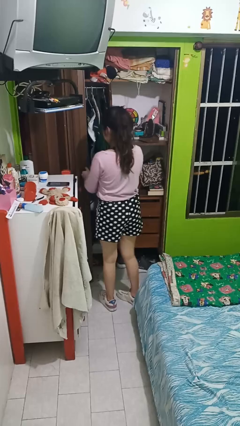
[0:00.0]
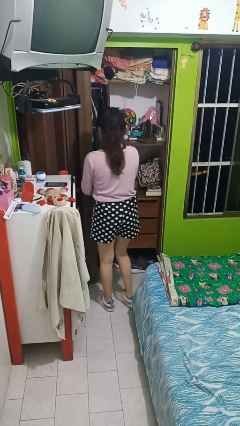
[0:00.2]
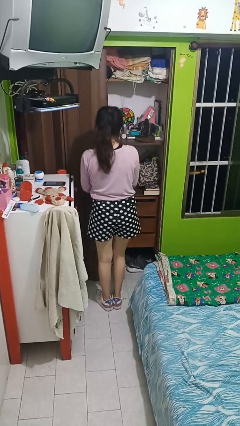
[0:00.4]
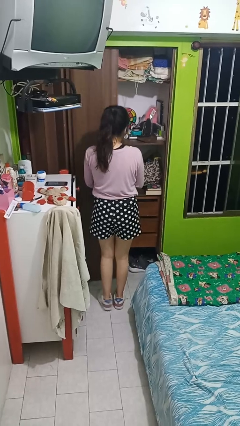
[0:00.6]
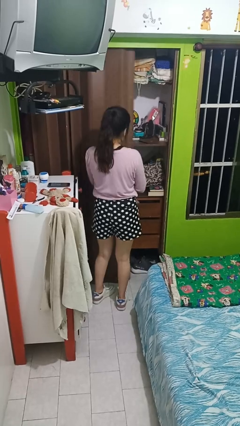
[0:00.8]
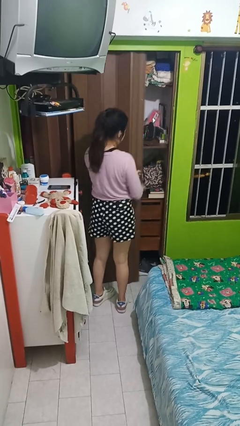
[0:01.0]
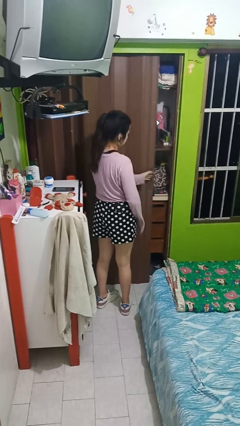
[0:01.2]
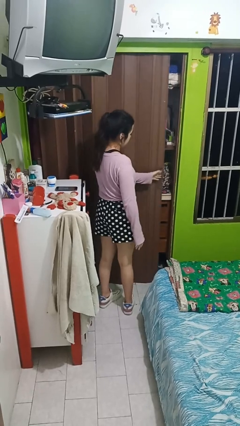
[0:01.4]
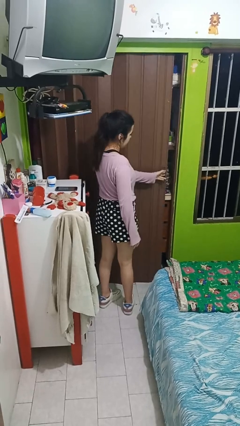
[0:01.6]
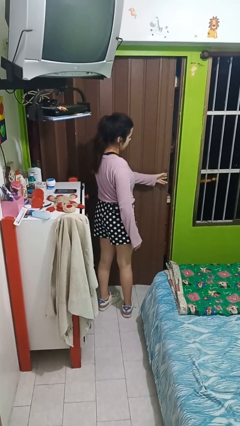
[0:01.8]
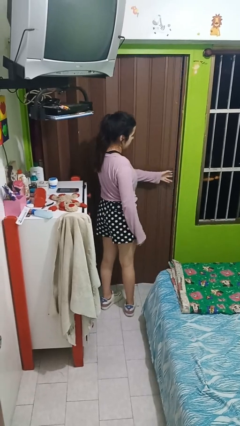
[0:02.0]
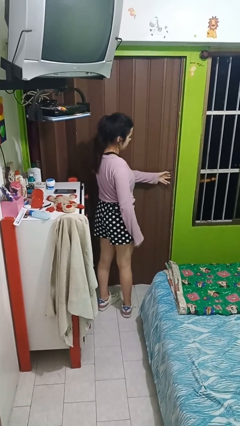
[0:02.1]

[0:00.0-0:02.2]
person closes sliding door

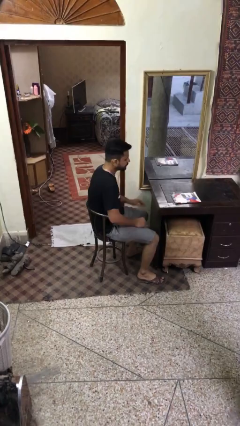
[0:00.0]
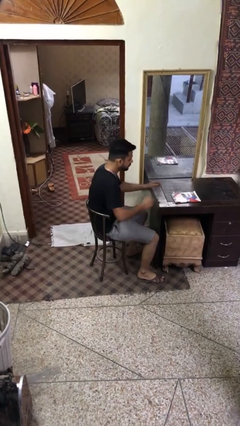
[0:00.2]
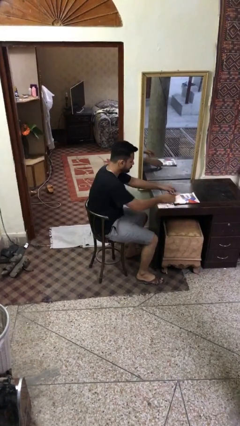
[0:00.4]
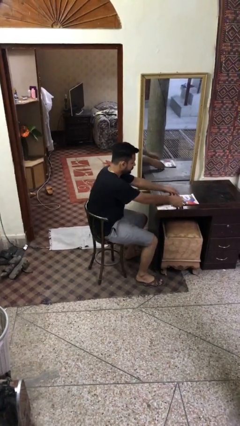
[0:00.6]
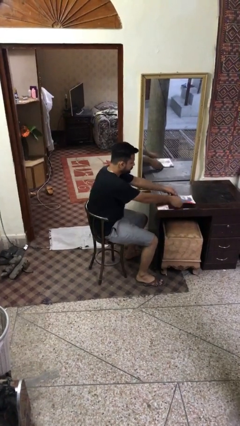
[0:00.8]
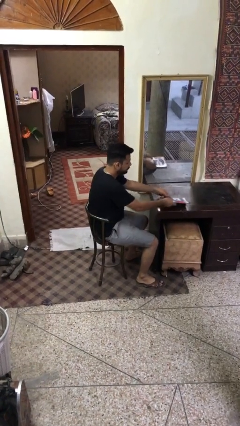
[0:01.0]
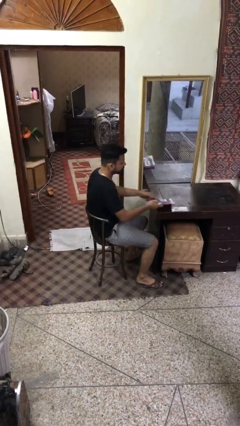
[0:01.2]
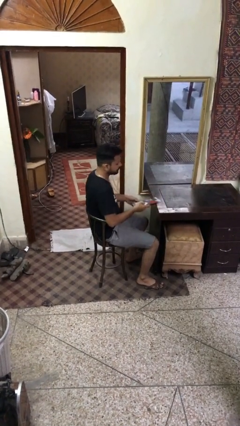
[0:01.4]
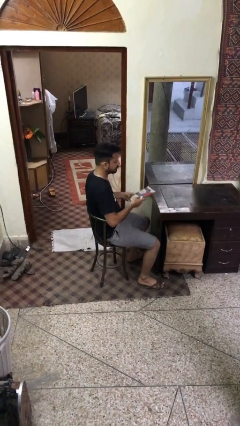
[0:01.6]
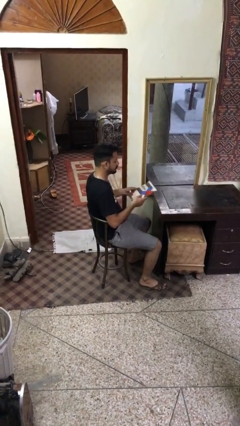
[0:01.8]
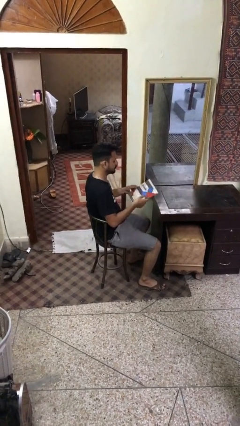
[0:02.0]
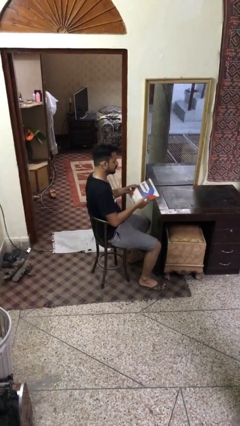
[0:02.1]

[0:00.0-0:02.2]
person picks up object from table

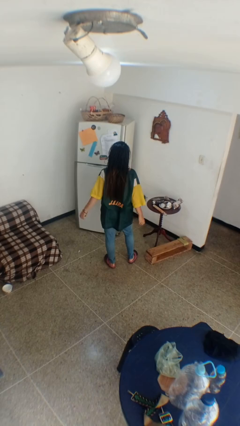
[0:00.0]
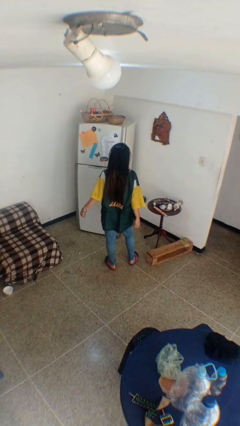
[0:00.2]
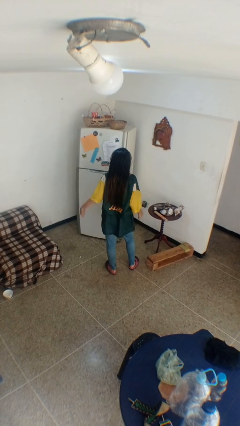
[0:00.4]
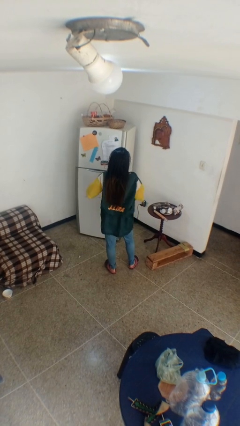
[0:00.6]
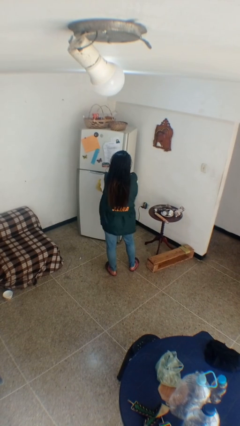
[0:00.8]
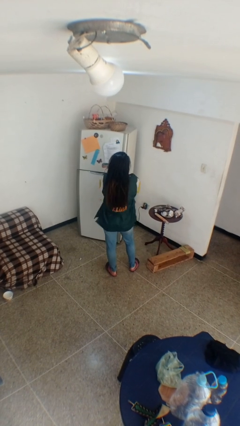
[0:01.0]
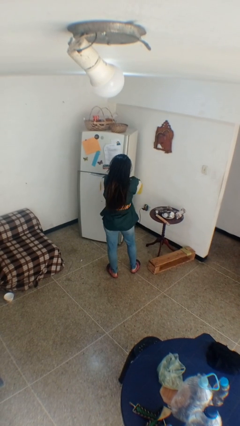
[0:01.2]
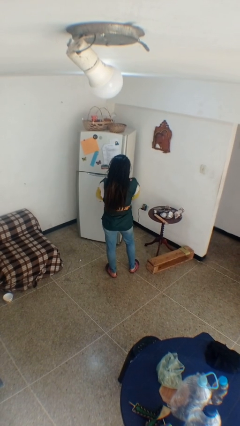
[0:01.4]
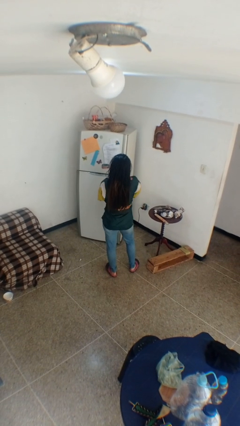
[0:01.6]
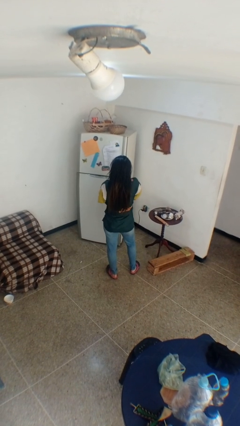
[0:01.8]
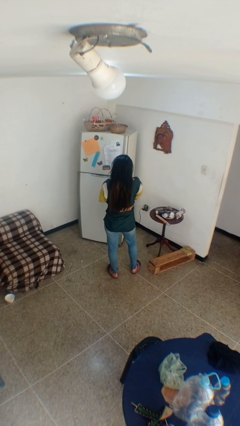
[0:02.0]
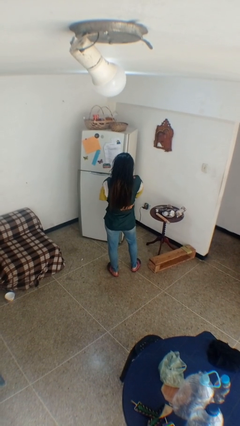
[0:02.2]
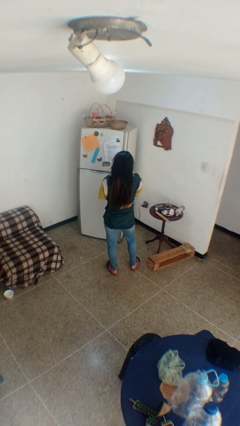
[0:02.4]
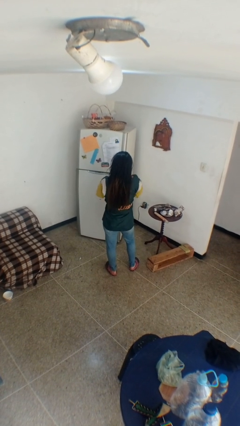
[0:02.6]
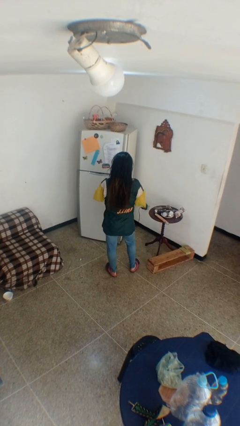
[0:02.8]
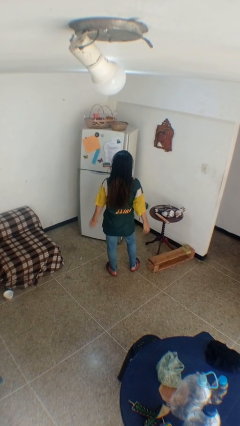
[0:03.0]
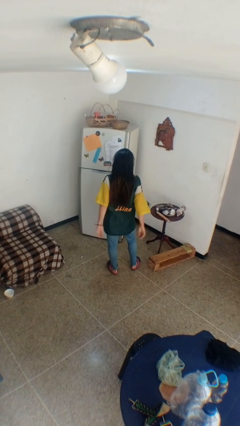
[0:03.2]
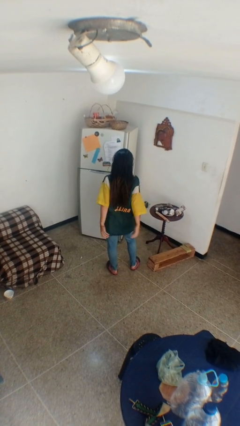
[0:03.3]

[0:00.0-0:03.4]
person gestures arms x

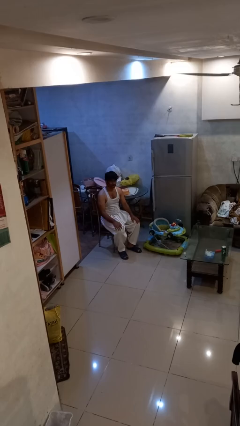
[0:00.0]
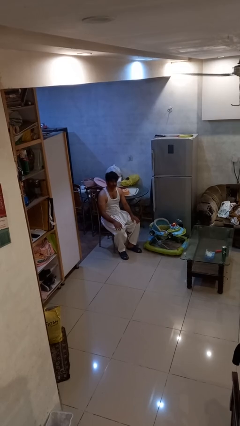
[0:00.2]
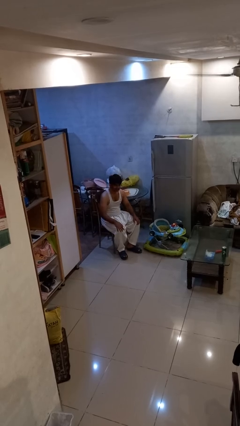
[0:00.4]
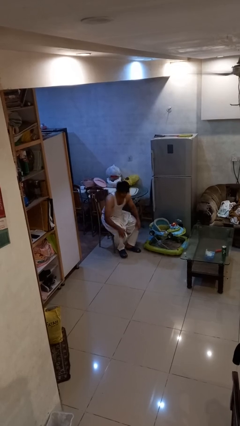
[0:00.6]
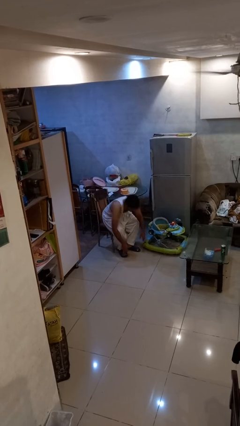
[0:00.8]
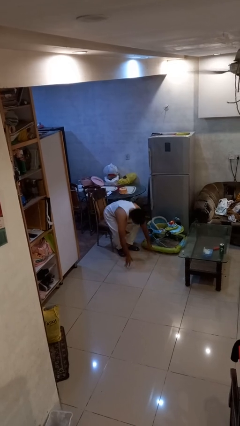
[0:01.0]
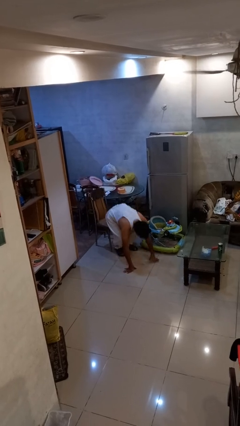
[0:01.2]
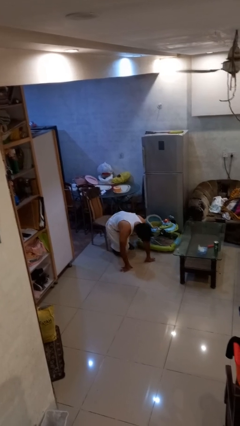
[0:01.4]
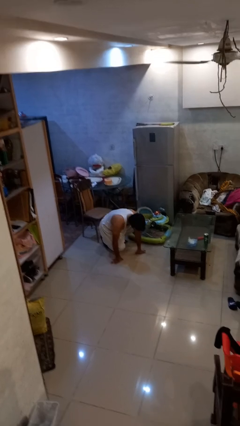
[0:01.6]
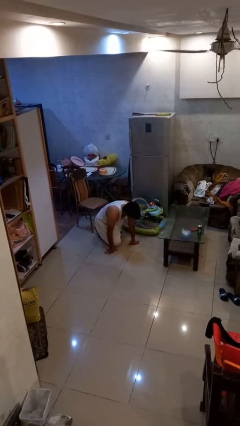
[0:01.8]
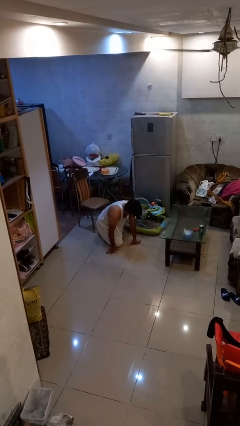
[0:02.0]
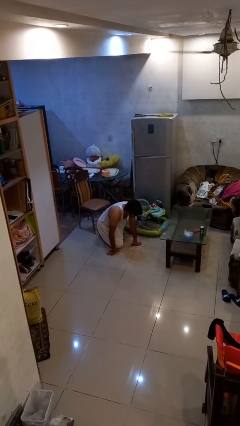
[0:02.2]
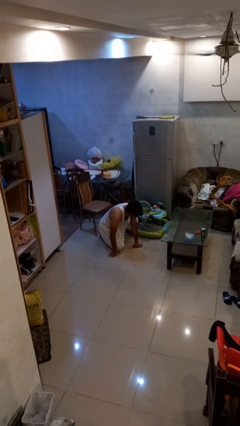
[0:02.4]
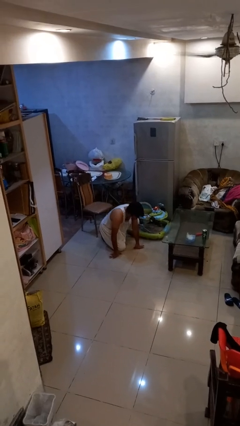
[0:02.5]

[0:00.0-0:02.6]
person falls from chair

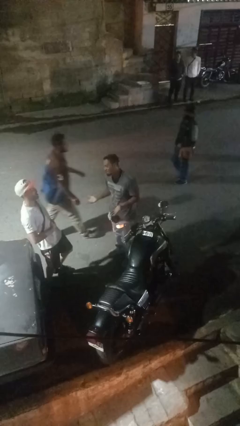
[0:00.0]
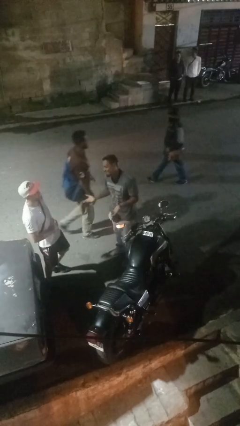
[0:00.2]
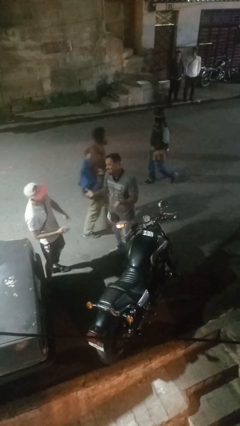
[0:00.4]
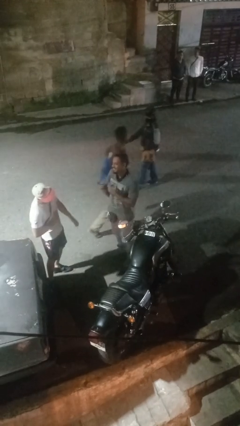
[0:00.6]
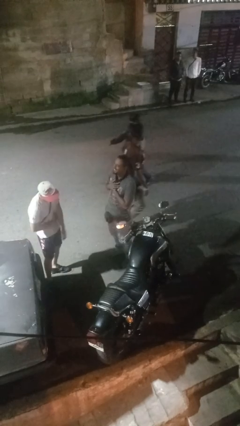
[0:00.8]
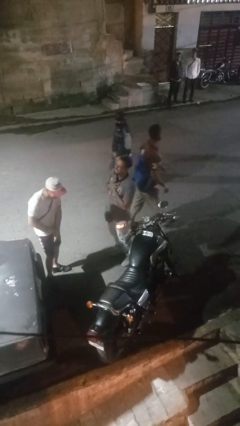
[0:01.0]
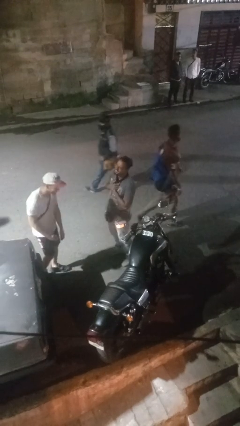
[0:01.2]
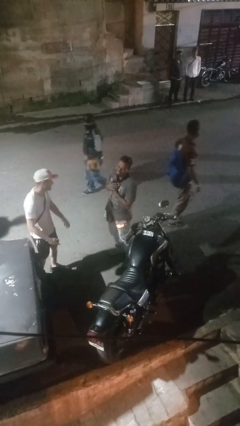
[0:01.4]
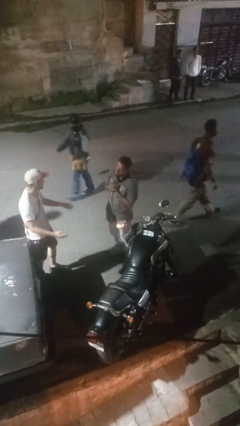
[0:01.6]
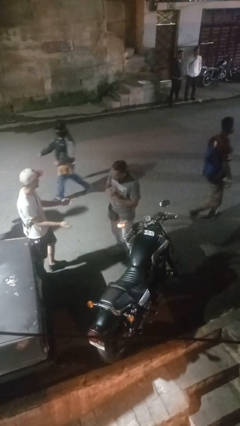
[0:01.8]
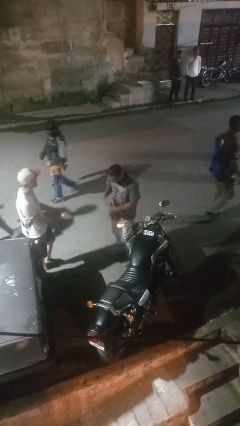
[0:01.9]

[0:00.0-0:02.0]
person laughs with person

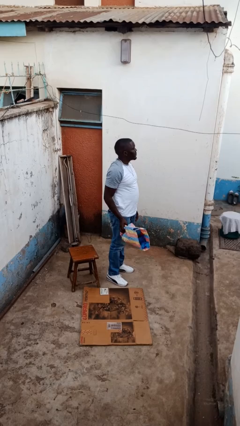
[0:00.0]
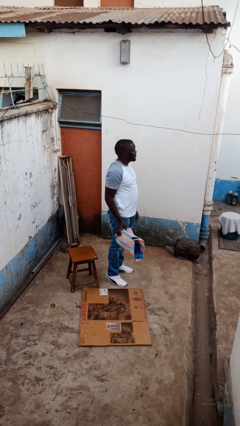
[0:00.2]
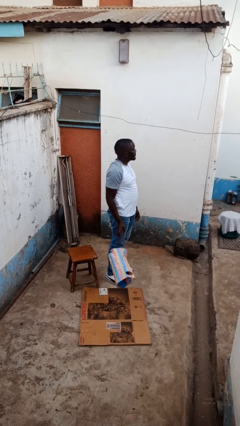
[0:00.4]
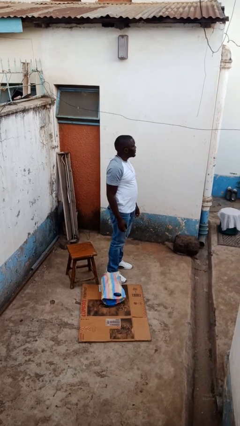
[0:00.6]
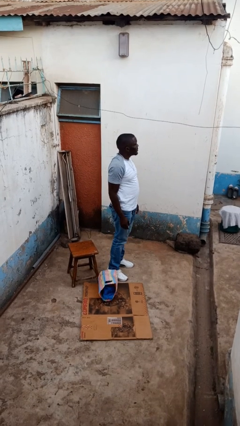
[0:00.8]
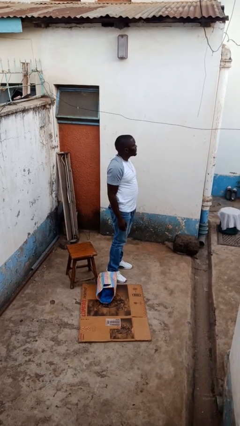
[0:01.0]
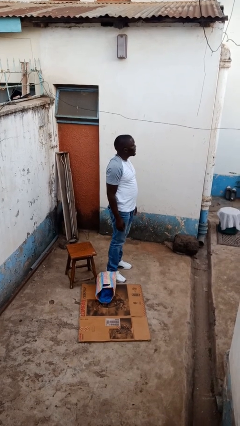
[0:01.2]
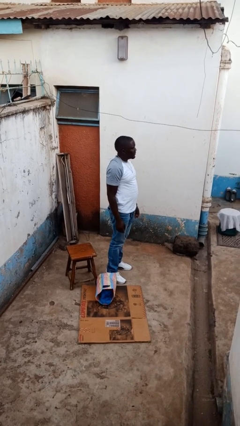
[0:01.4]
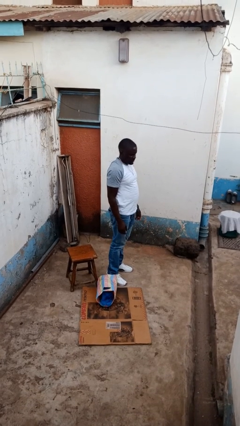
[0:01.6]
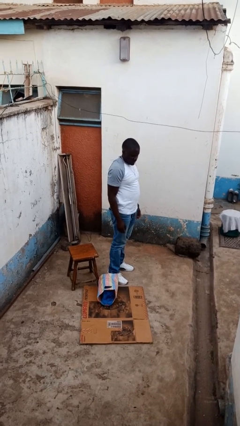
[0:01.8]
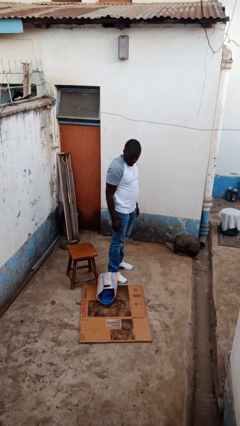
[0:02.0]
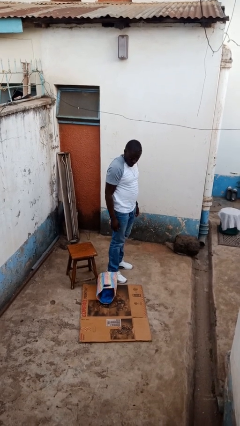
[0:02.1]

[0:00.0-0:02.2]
person drops object

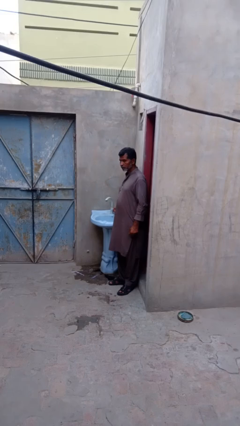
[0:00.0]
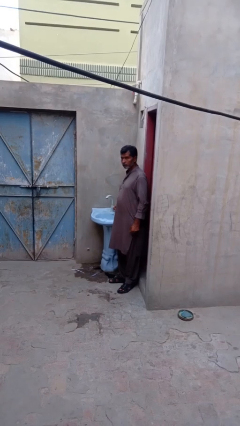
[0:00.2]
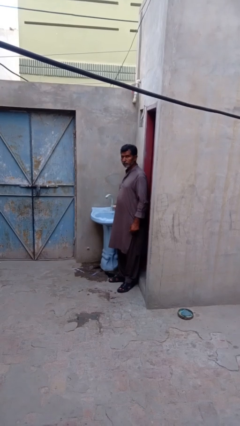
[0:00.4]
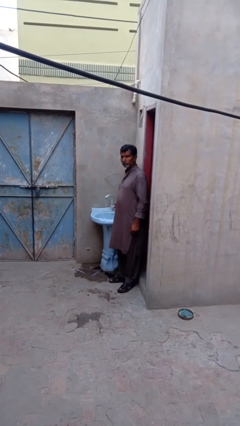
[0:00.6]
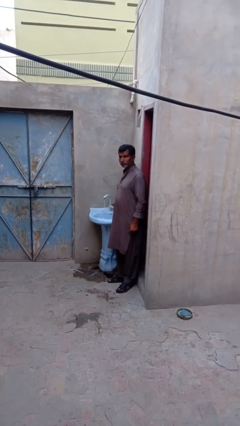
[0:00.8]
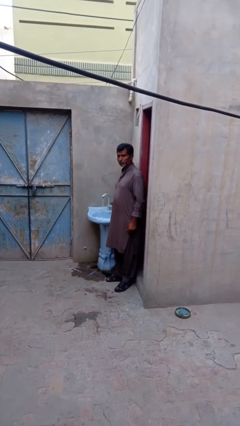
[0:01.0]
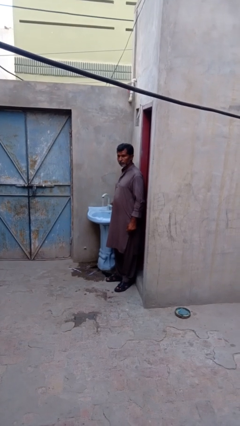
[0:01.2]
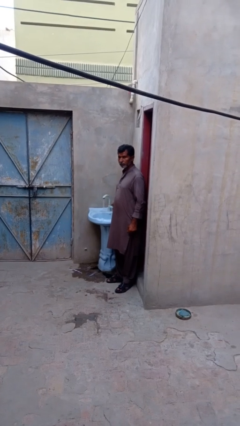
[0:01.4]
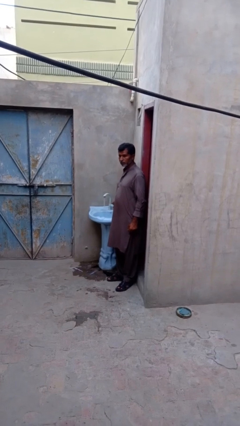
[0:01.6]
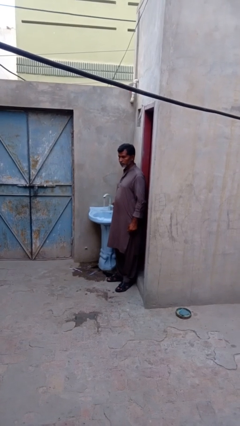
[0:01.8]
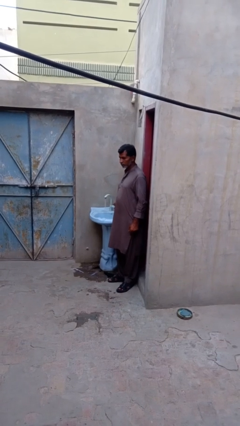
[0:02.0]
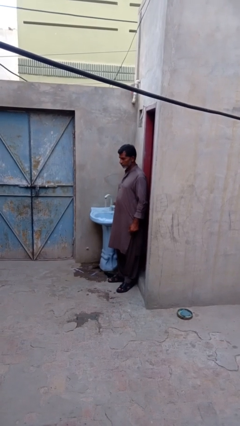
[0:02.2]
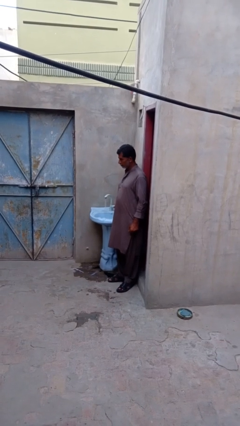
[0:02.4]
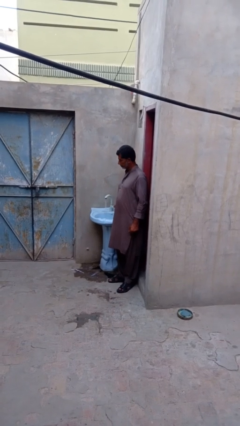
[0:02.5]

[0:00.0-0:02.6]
person turns on faucet
